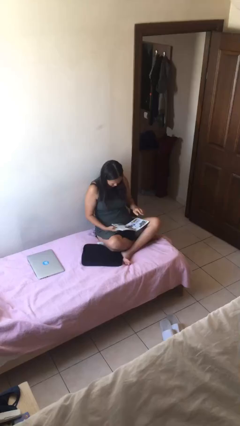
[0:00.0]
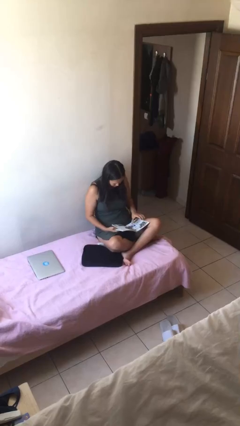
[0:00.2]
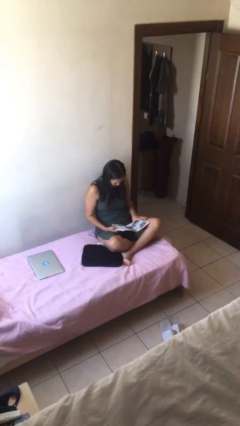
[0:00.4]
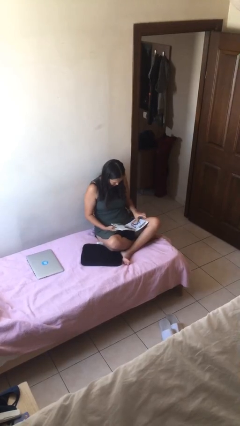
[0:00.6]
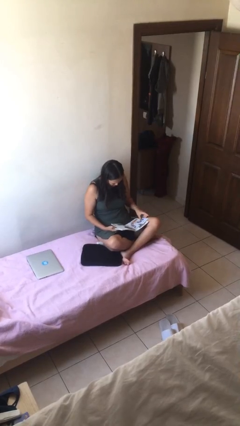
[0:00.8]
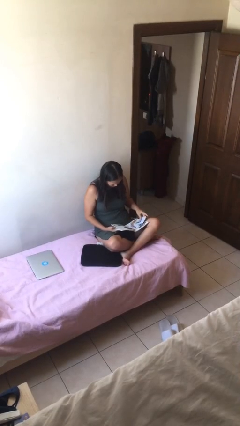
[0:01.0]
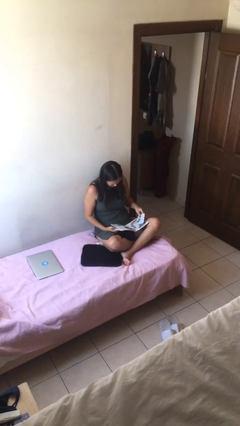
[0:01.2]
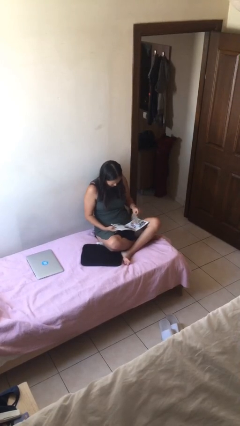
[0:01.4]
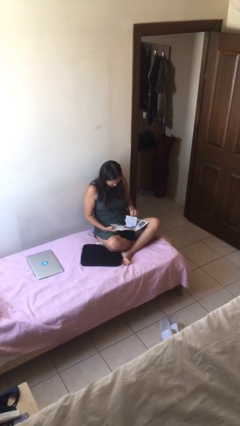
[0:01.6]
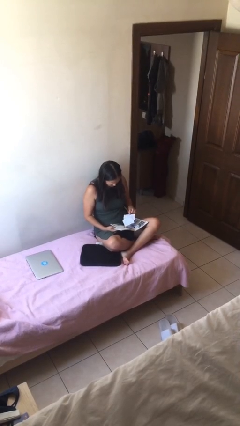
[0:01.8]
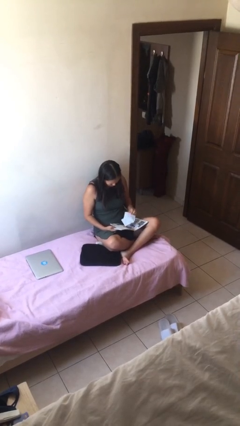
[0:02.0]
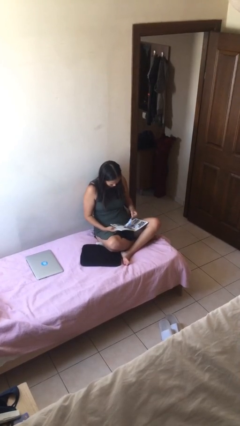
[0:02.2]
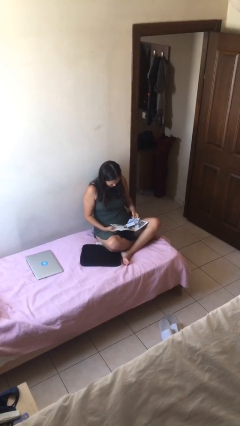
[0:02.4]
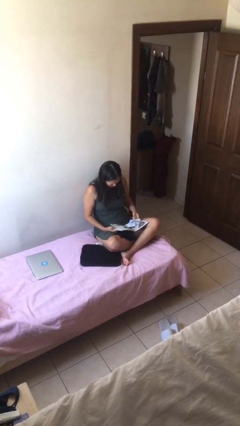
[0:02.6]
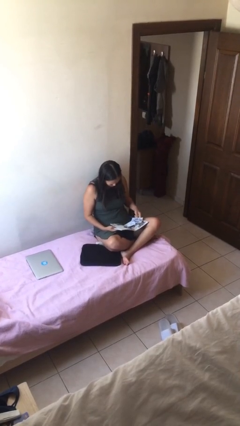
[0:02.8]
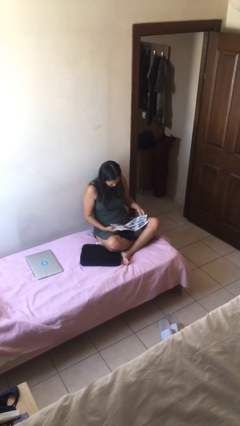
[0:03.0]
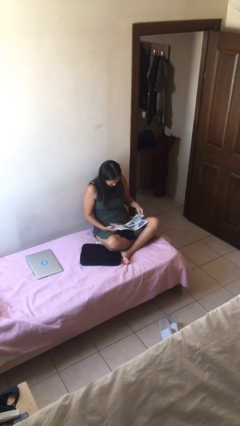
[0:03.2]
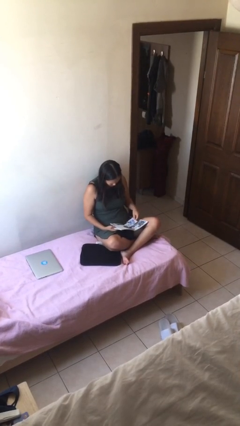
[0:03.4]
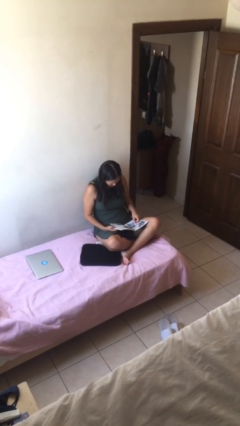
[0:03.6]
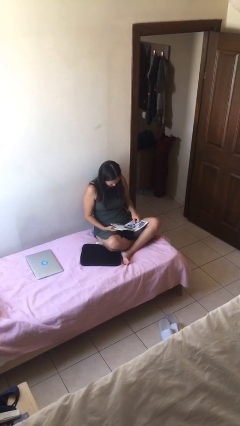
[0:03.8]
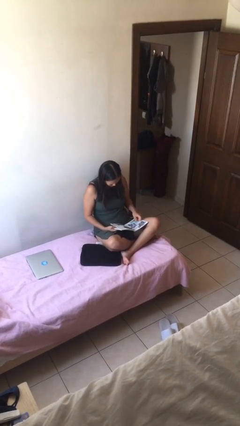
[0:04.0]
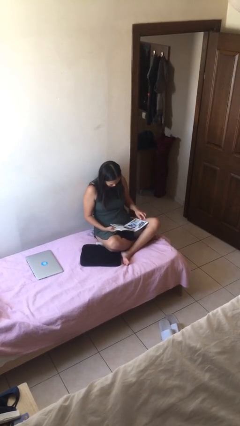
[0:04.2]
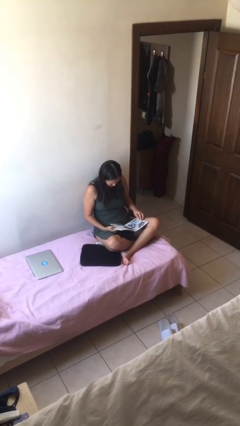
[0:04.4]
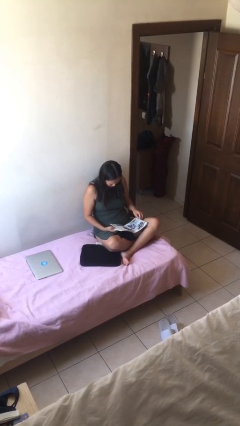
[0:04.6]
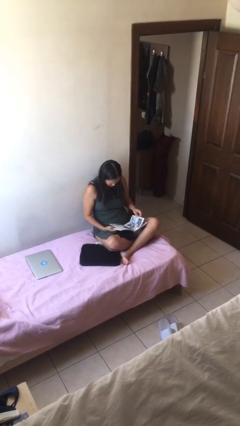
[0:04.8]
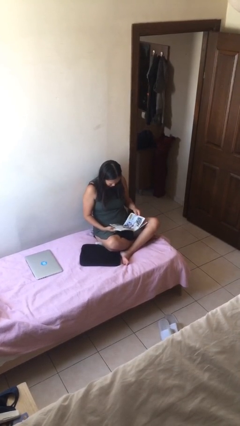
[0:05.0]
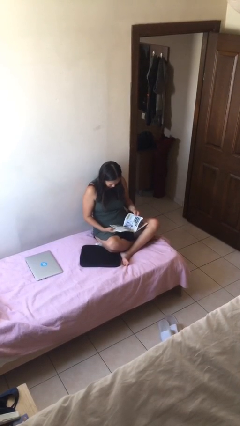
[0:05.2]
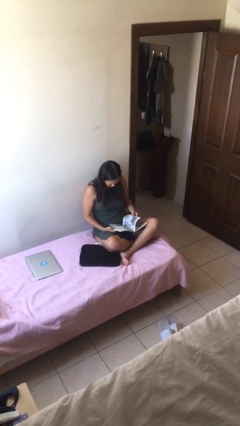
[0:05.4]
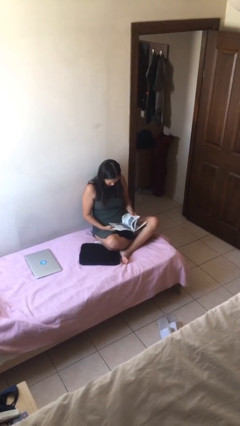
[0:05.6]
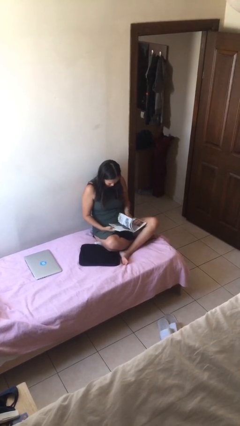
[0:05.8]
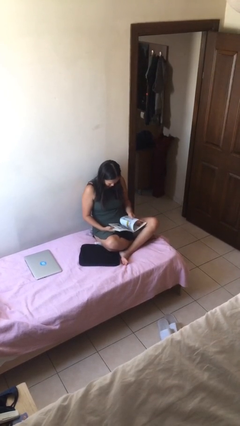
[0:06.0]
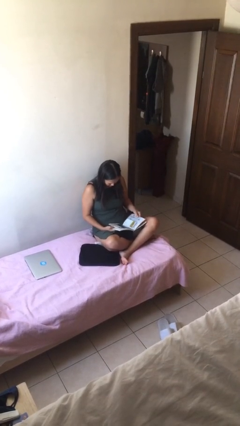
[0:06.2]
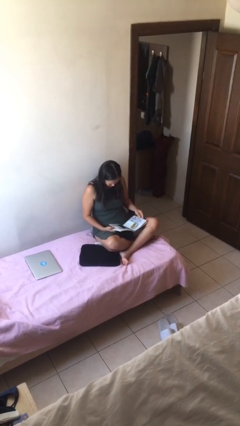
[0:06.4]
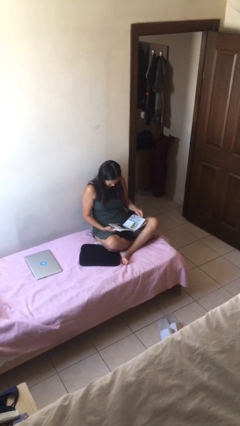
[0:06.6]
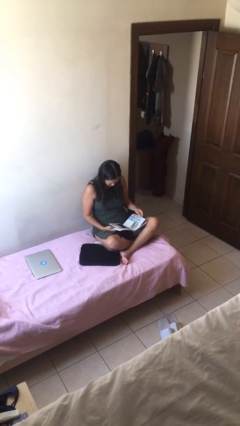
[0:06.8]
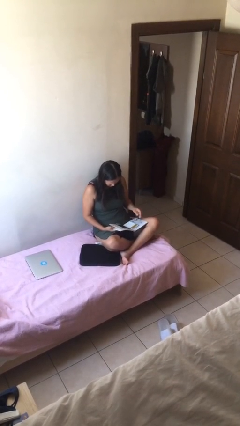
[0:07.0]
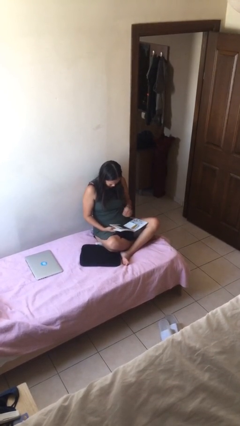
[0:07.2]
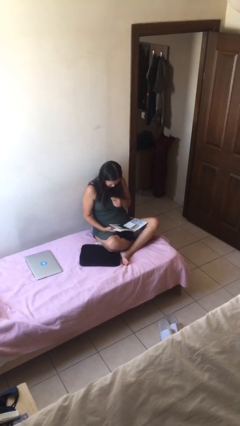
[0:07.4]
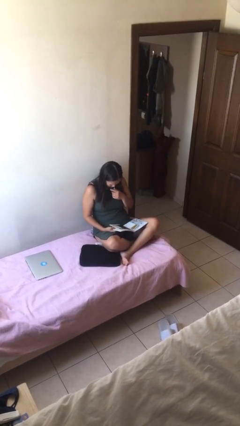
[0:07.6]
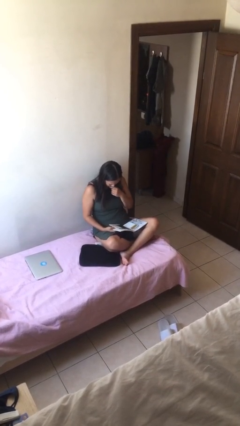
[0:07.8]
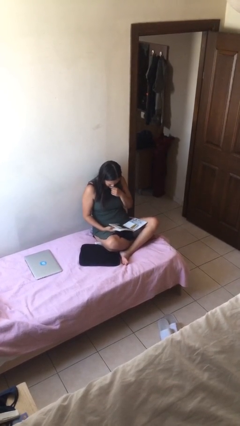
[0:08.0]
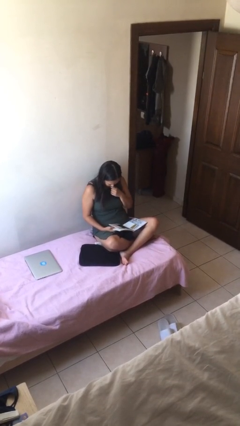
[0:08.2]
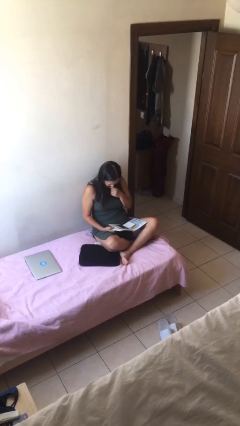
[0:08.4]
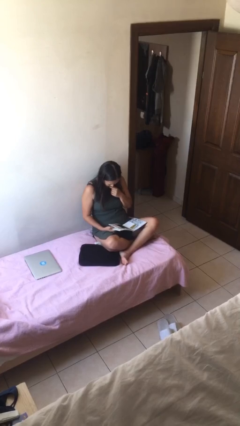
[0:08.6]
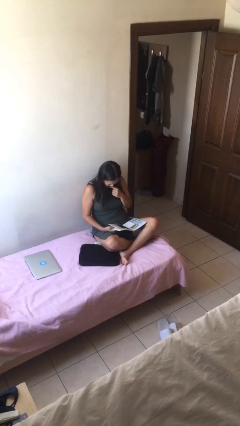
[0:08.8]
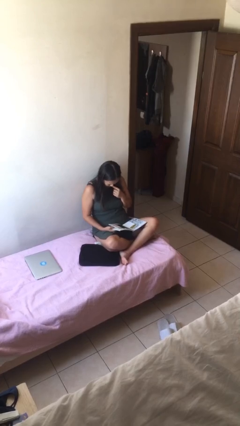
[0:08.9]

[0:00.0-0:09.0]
person reads document

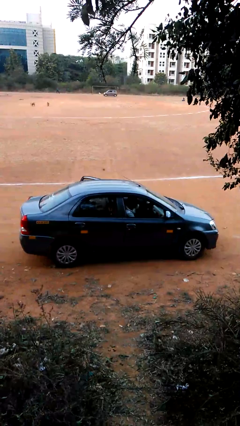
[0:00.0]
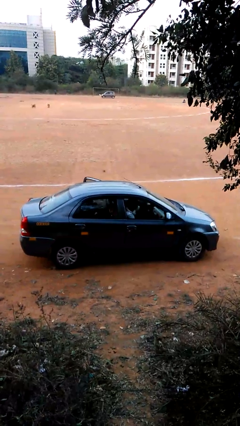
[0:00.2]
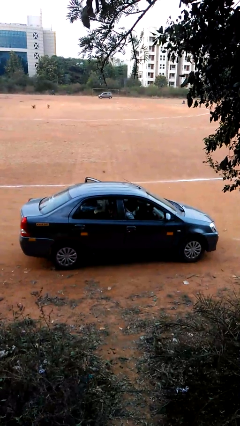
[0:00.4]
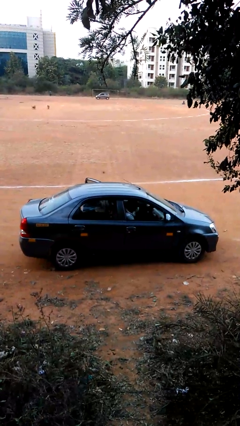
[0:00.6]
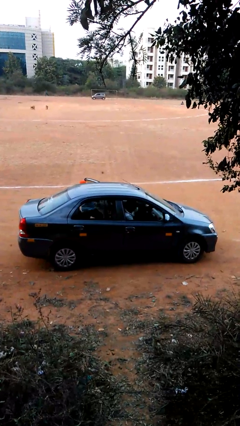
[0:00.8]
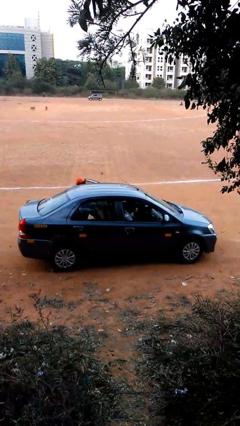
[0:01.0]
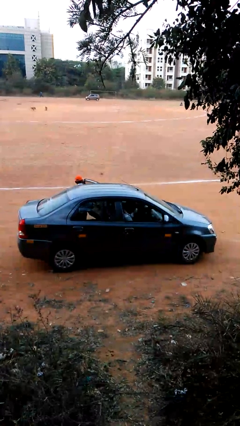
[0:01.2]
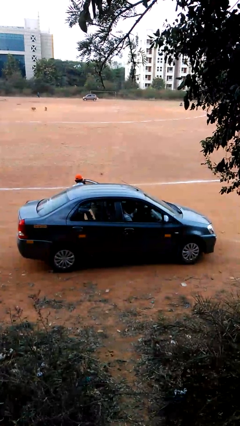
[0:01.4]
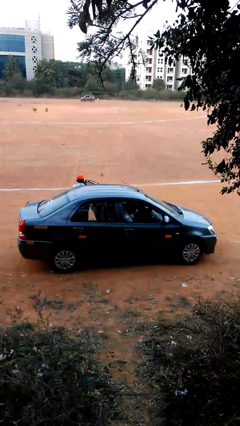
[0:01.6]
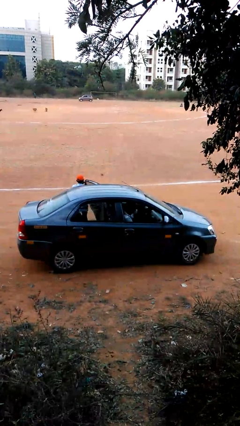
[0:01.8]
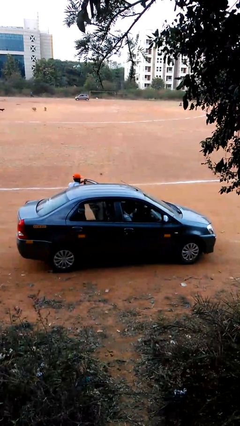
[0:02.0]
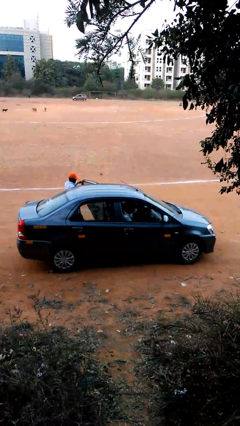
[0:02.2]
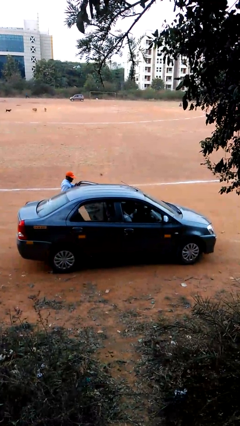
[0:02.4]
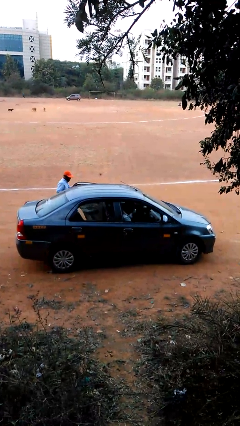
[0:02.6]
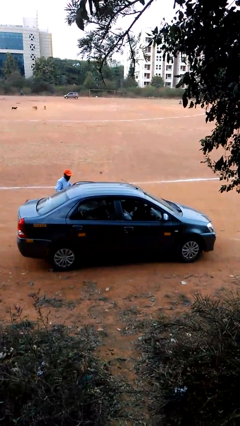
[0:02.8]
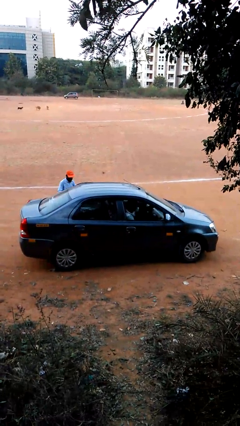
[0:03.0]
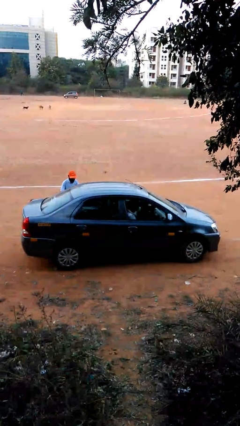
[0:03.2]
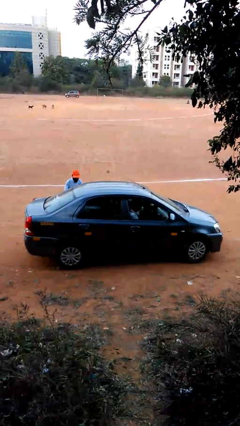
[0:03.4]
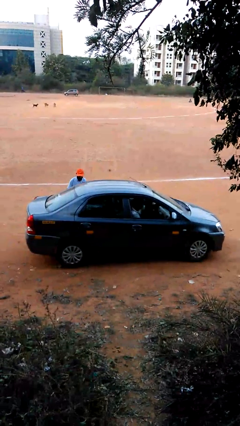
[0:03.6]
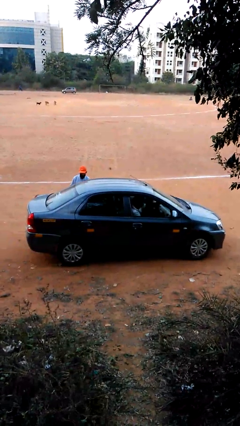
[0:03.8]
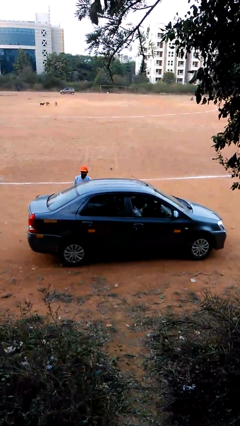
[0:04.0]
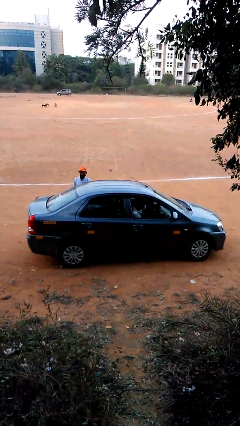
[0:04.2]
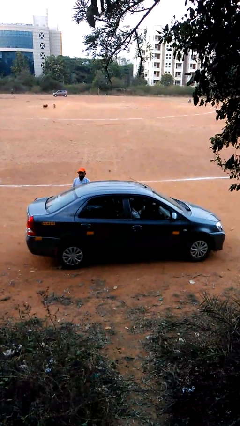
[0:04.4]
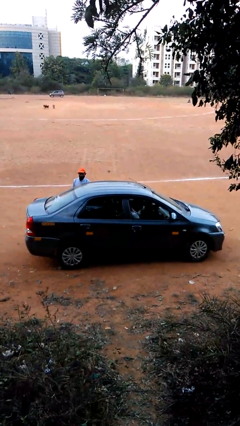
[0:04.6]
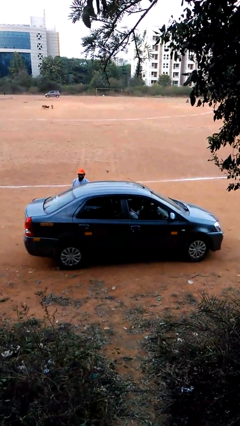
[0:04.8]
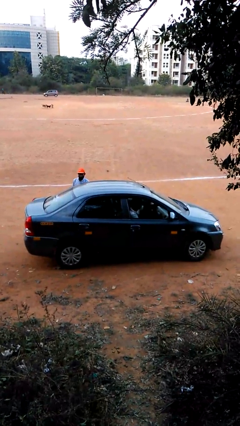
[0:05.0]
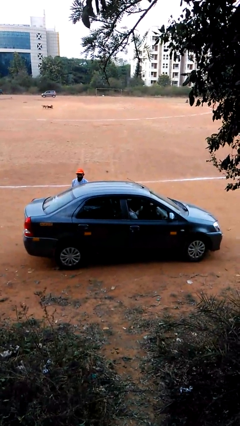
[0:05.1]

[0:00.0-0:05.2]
car drops off person

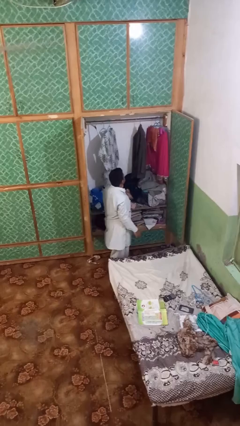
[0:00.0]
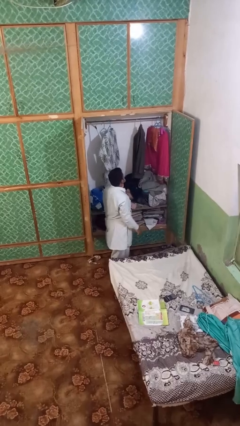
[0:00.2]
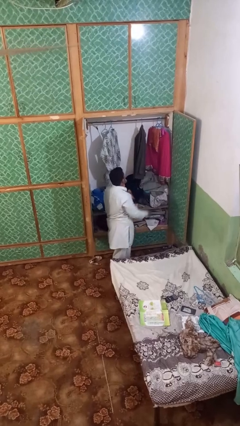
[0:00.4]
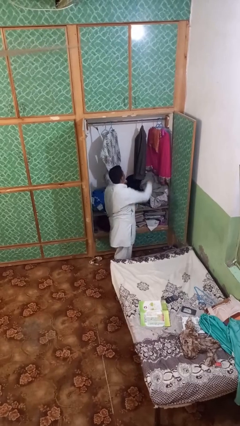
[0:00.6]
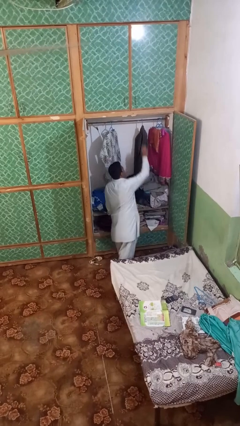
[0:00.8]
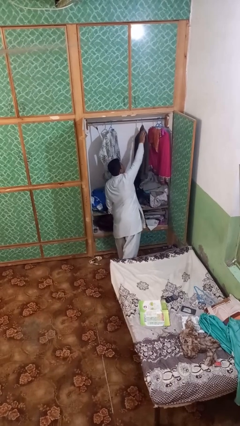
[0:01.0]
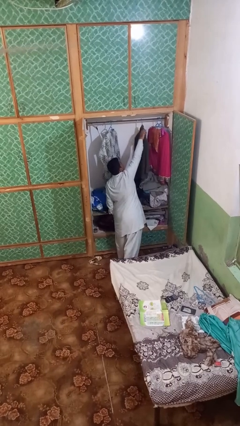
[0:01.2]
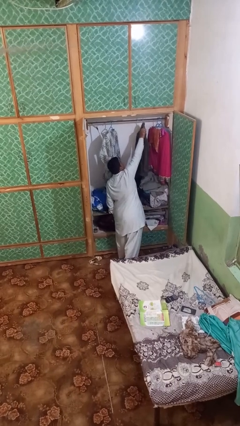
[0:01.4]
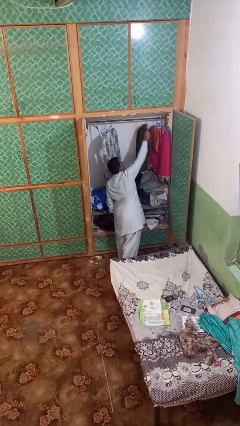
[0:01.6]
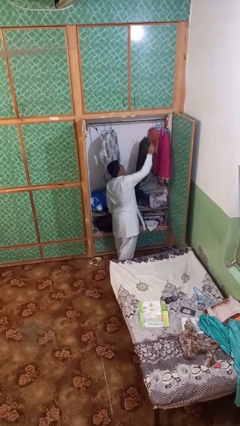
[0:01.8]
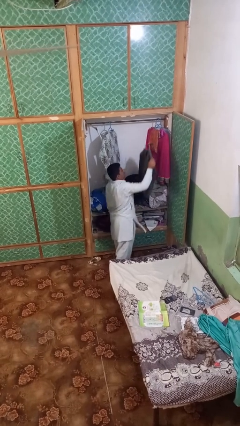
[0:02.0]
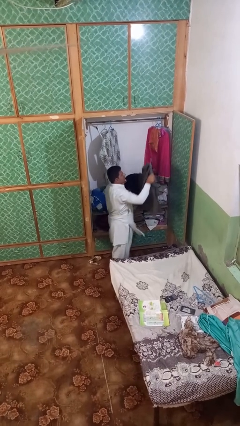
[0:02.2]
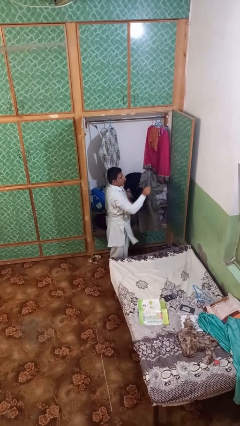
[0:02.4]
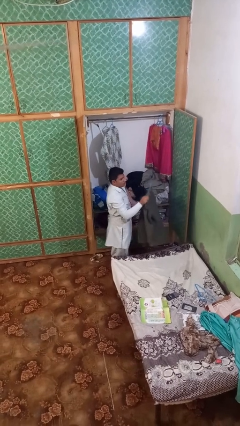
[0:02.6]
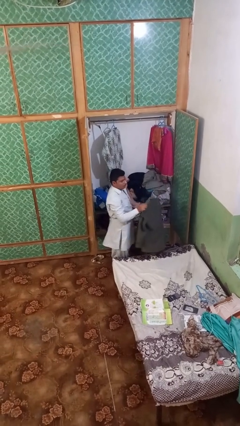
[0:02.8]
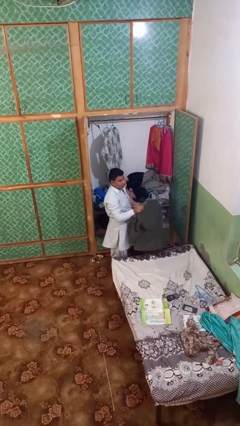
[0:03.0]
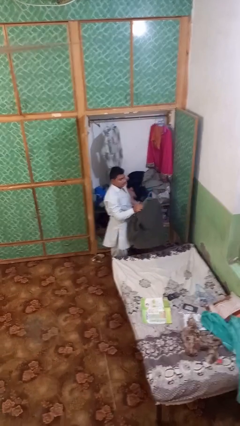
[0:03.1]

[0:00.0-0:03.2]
person takes clothes from closet
